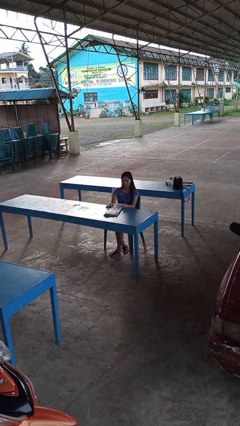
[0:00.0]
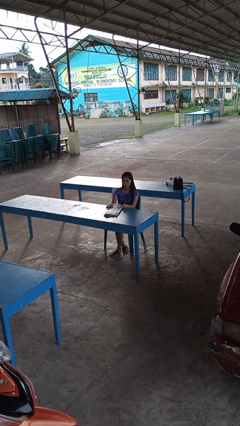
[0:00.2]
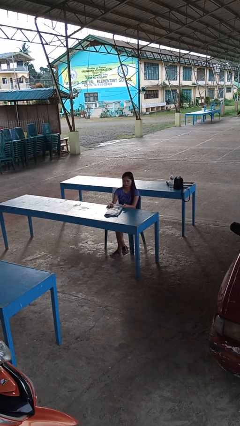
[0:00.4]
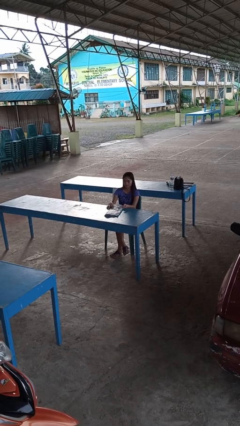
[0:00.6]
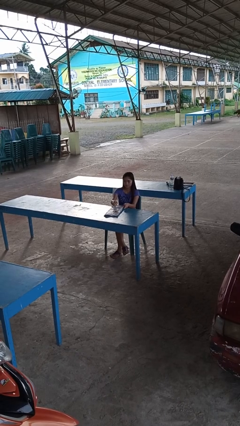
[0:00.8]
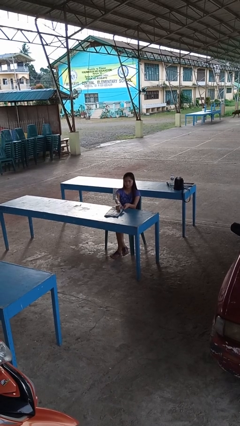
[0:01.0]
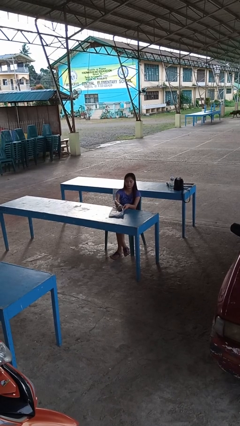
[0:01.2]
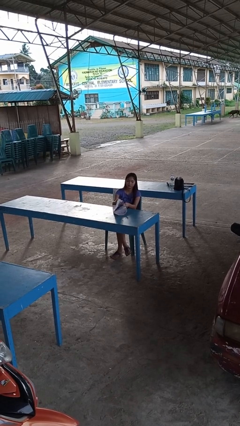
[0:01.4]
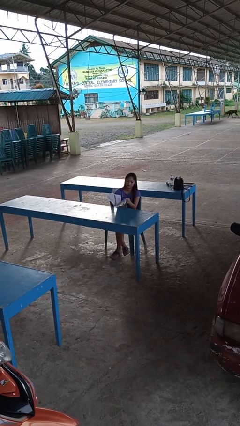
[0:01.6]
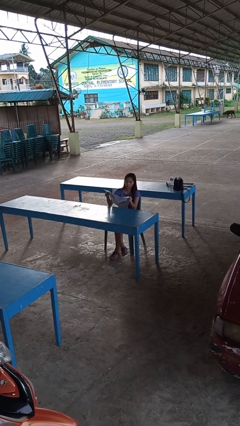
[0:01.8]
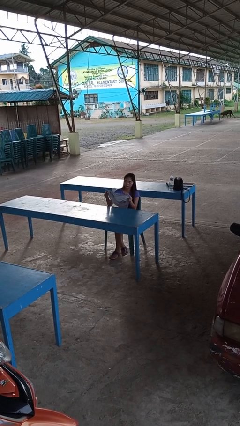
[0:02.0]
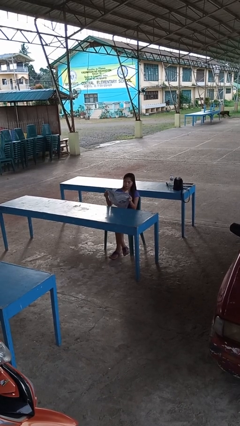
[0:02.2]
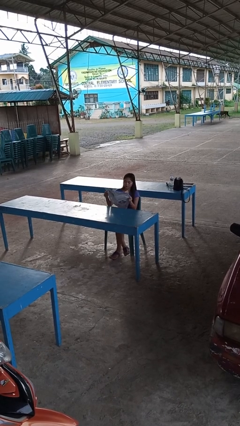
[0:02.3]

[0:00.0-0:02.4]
person reads newspaper

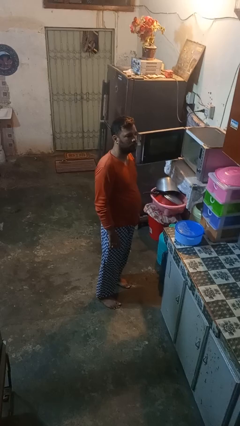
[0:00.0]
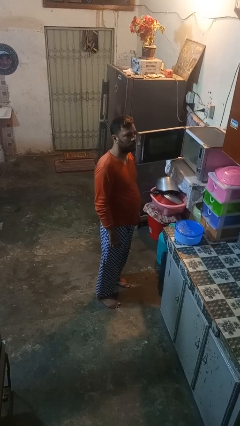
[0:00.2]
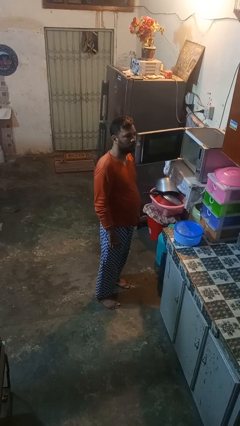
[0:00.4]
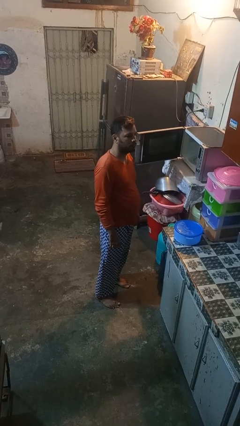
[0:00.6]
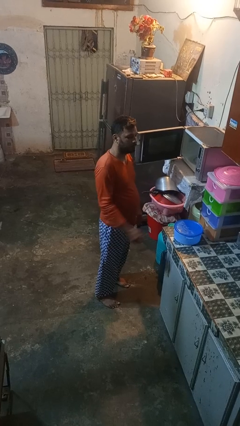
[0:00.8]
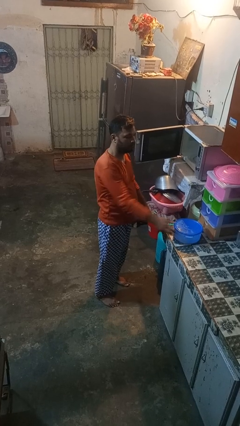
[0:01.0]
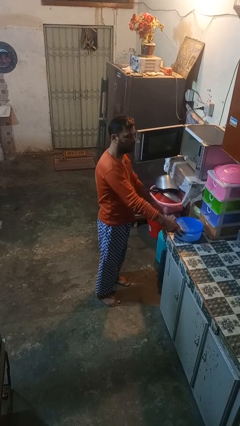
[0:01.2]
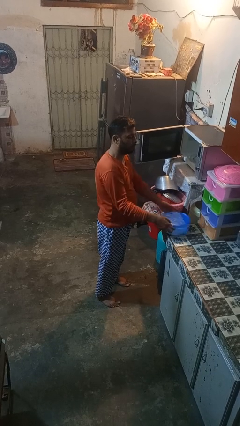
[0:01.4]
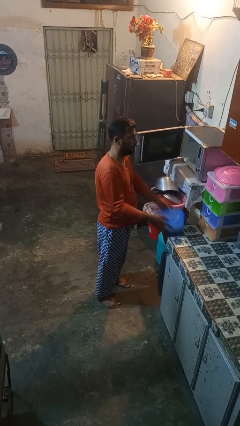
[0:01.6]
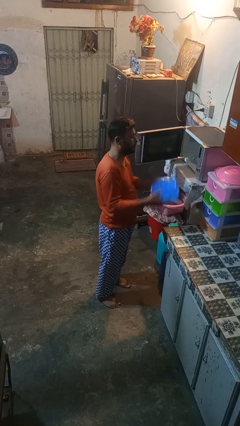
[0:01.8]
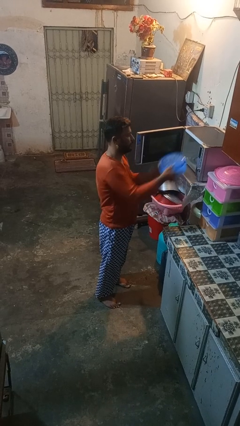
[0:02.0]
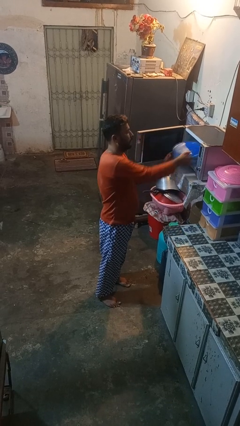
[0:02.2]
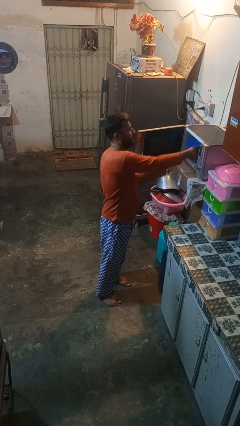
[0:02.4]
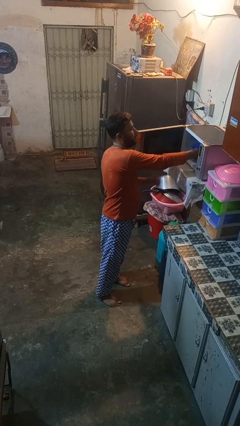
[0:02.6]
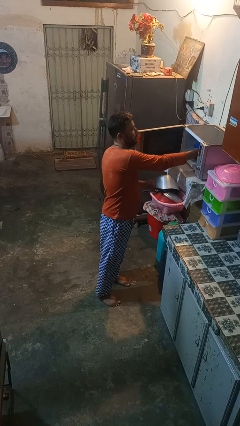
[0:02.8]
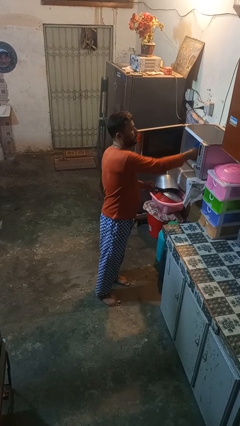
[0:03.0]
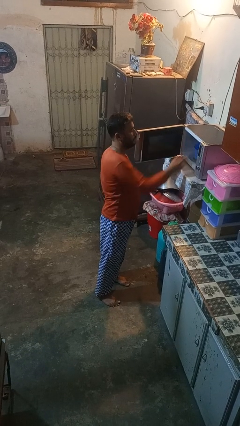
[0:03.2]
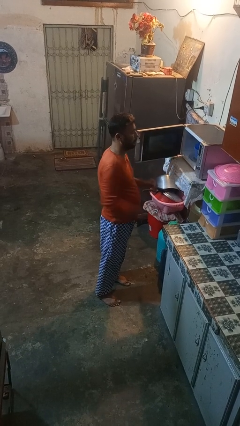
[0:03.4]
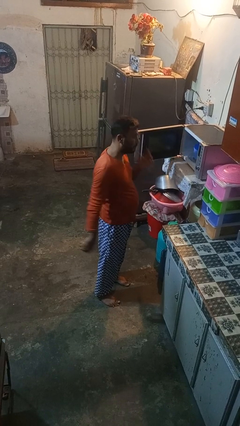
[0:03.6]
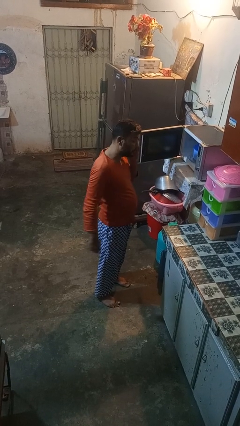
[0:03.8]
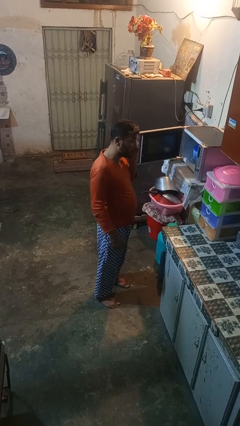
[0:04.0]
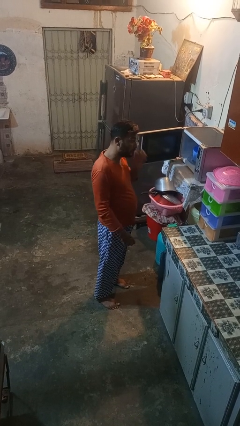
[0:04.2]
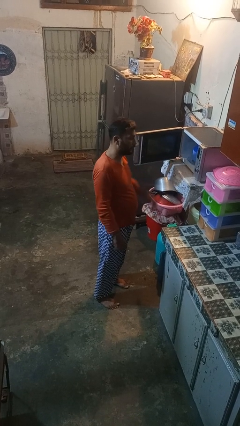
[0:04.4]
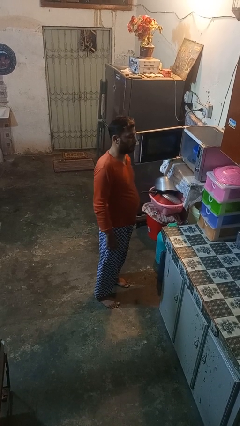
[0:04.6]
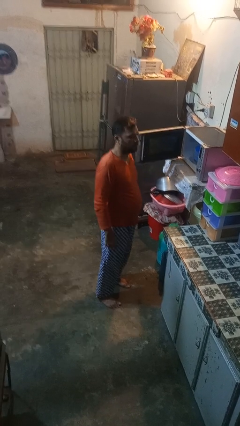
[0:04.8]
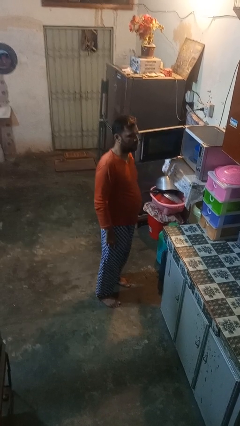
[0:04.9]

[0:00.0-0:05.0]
person puts object into microwave

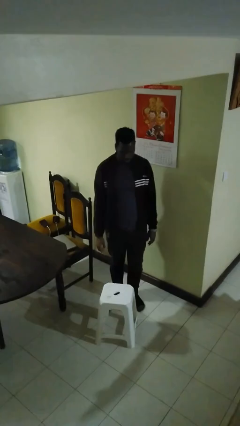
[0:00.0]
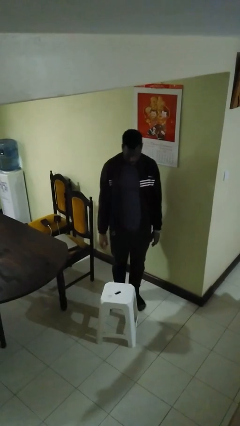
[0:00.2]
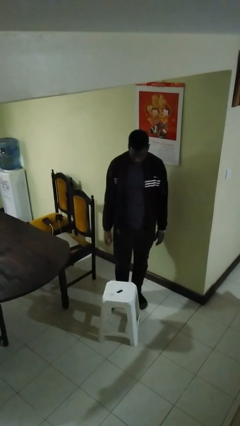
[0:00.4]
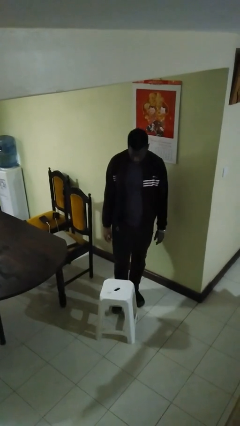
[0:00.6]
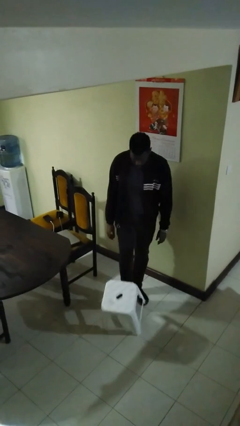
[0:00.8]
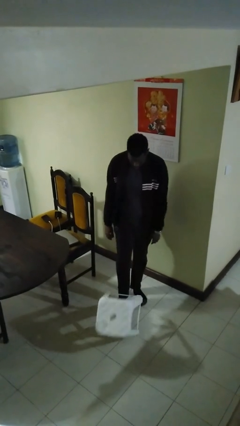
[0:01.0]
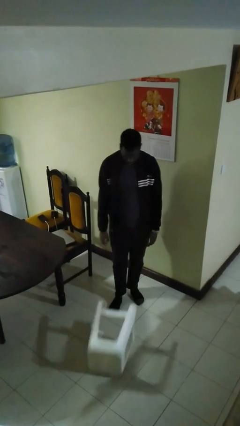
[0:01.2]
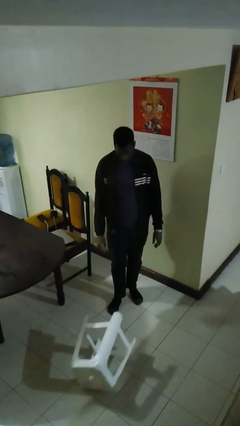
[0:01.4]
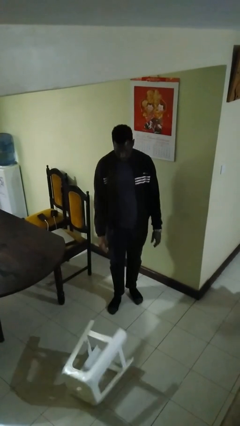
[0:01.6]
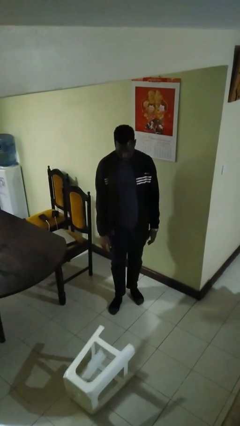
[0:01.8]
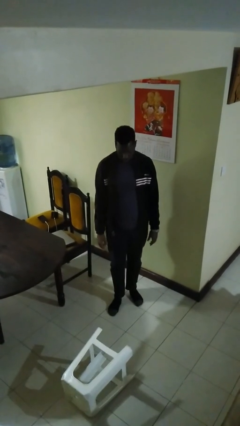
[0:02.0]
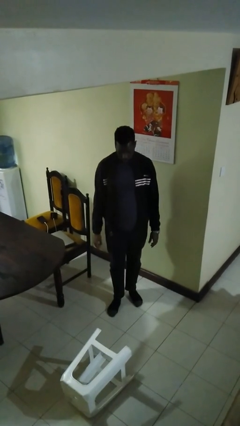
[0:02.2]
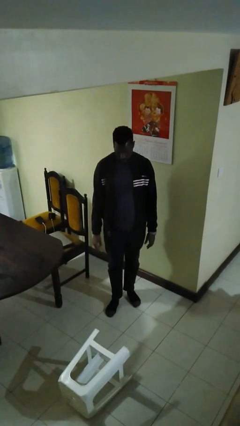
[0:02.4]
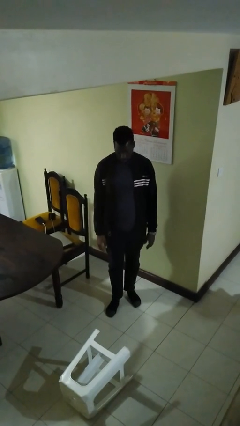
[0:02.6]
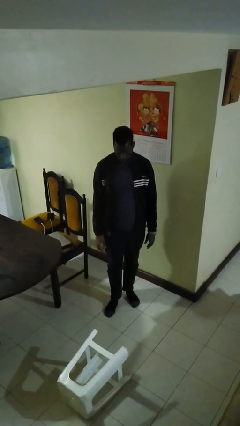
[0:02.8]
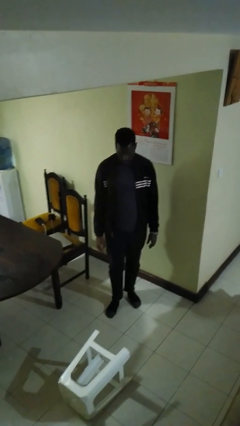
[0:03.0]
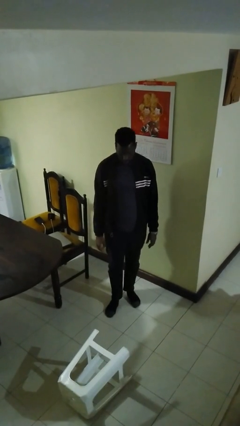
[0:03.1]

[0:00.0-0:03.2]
person knocks over furniture

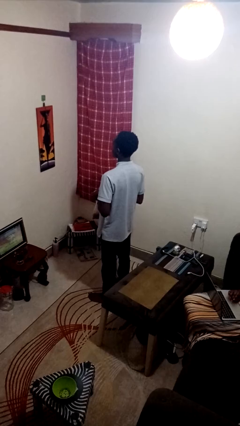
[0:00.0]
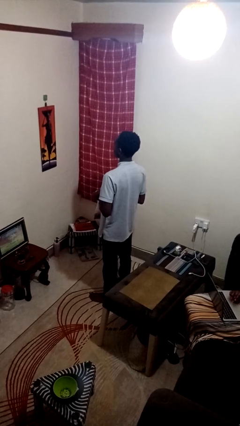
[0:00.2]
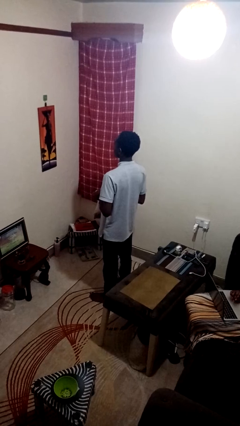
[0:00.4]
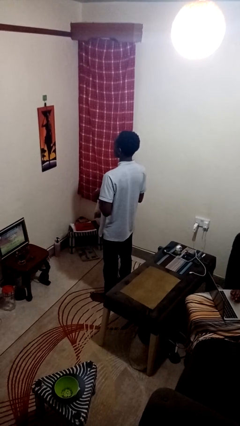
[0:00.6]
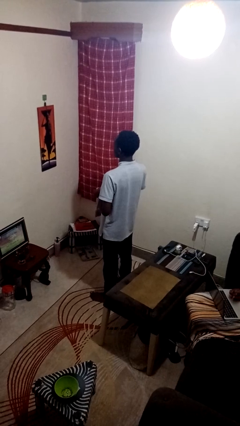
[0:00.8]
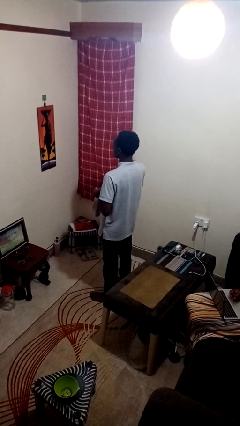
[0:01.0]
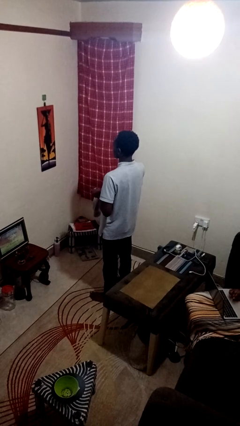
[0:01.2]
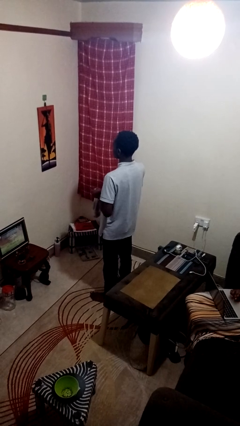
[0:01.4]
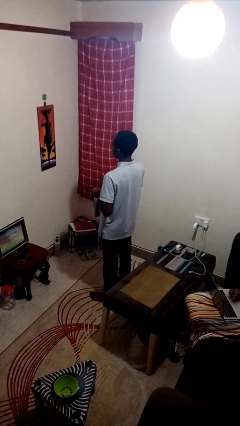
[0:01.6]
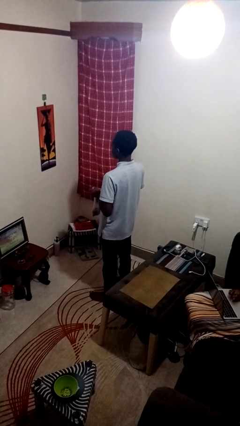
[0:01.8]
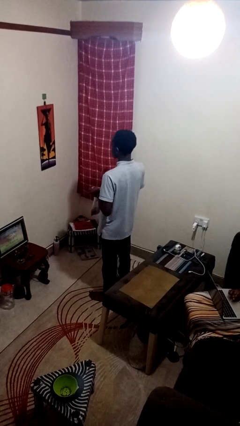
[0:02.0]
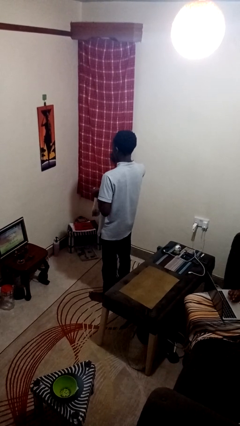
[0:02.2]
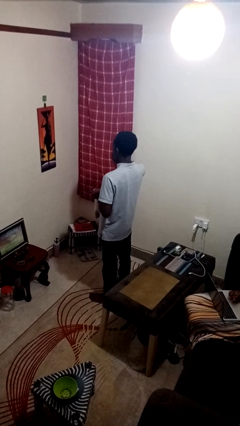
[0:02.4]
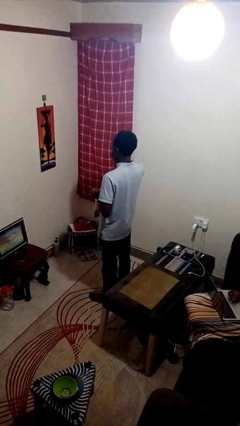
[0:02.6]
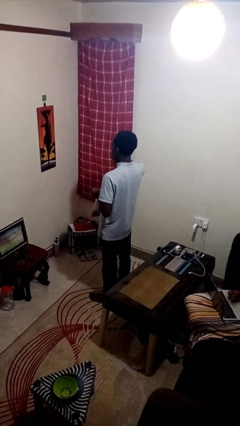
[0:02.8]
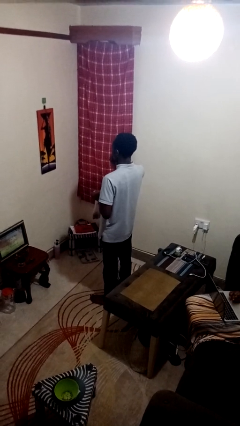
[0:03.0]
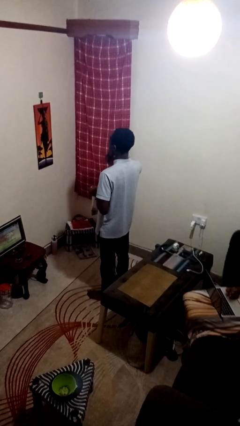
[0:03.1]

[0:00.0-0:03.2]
person eats snack from bag

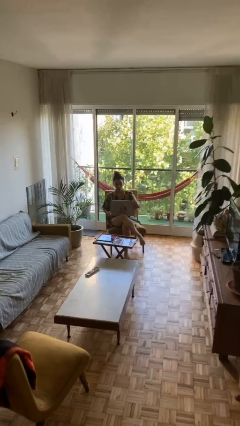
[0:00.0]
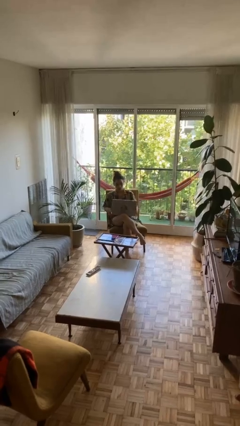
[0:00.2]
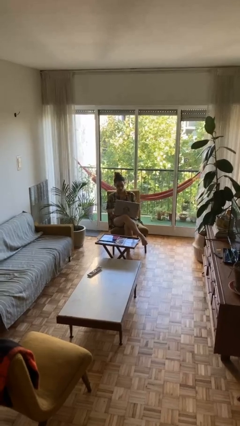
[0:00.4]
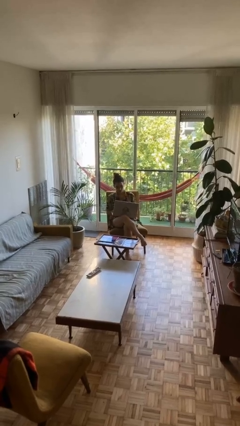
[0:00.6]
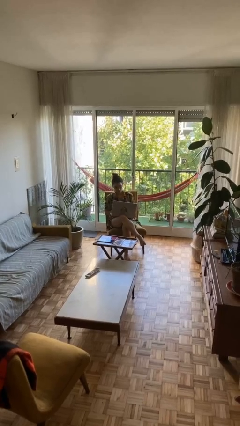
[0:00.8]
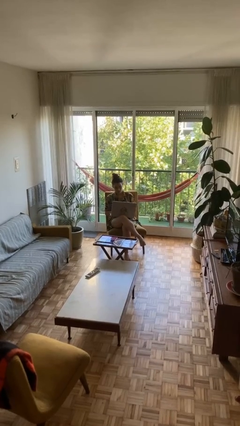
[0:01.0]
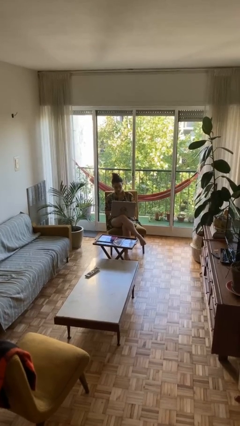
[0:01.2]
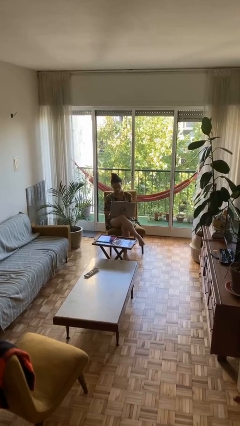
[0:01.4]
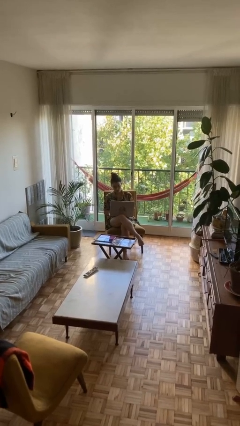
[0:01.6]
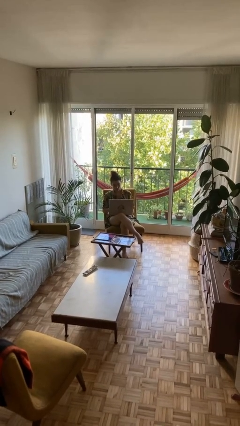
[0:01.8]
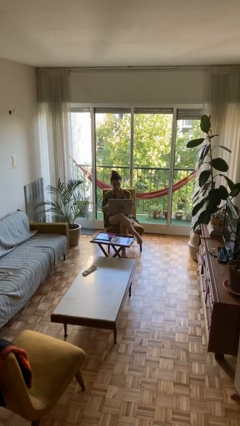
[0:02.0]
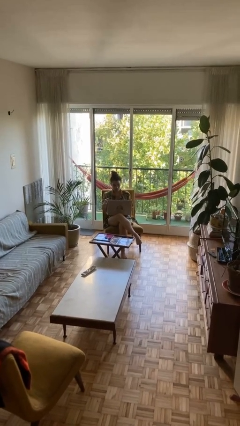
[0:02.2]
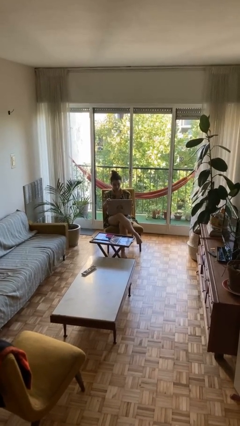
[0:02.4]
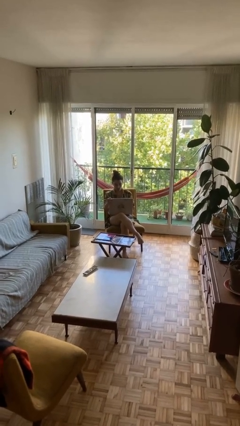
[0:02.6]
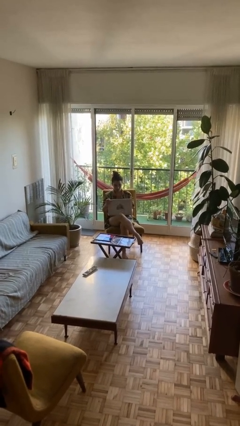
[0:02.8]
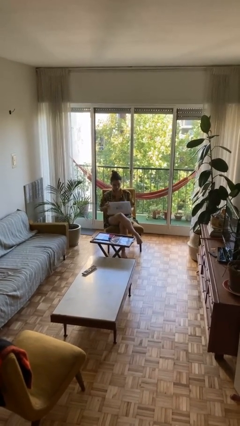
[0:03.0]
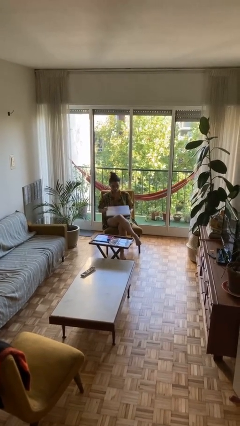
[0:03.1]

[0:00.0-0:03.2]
person interacts with laptop

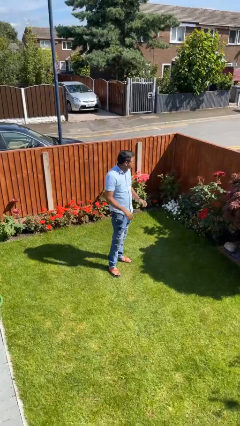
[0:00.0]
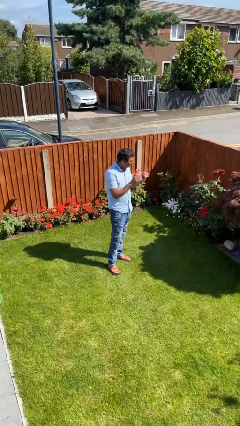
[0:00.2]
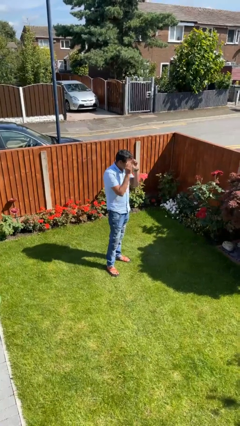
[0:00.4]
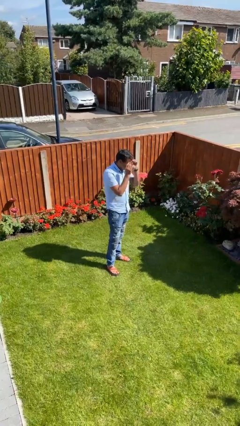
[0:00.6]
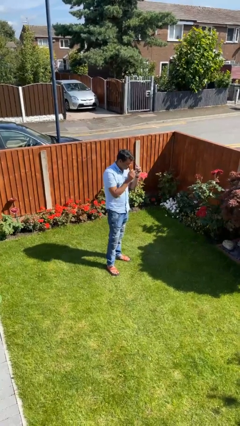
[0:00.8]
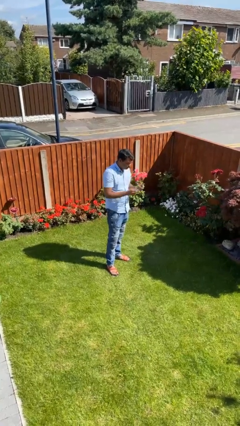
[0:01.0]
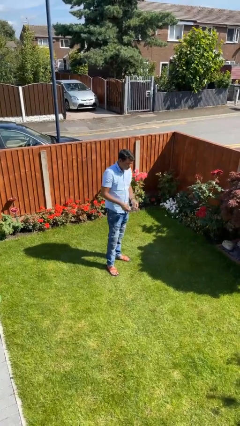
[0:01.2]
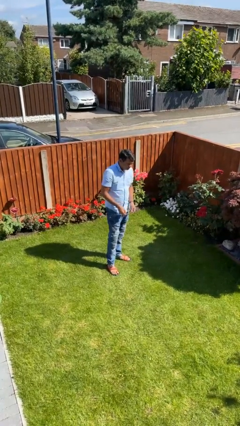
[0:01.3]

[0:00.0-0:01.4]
person takes off glasses
